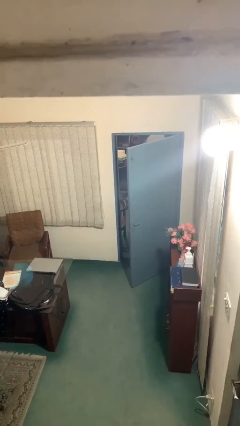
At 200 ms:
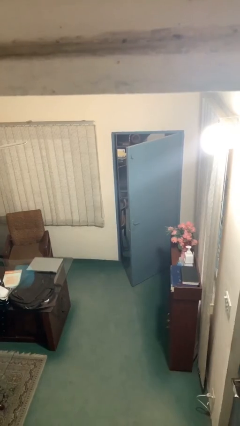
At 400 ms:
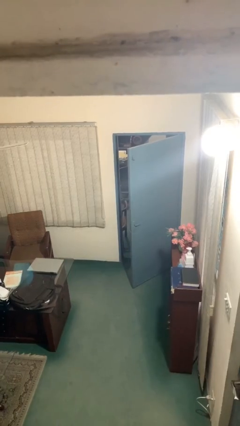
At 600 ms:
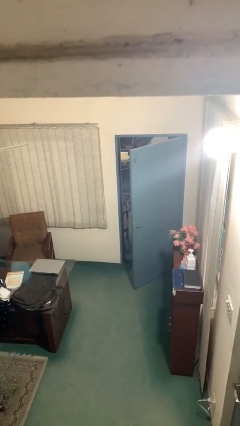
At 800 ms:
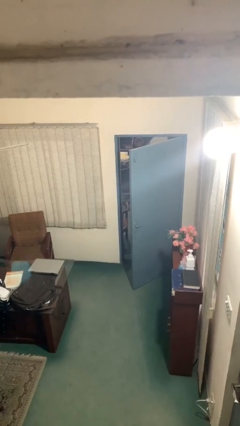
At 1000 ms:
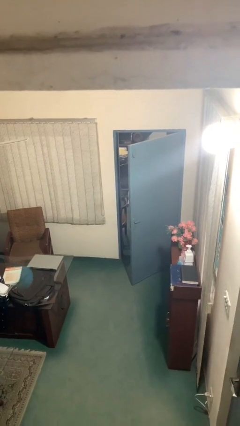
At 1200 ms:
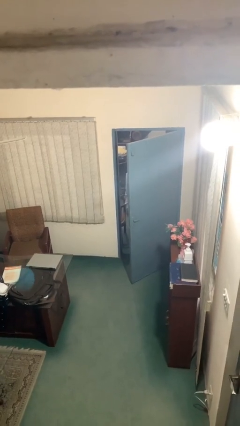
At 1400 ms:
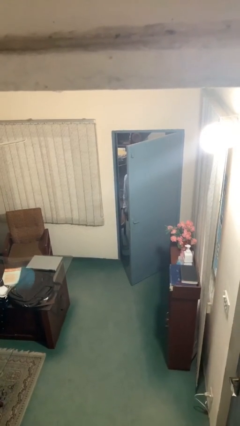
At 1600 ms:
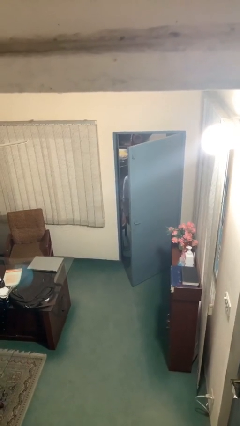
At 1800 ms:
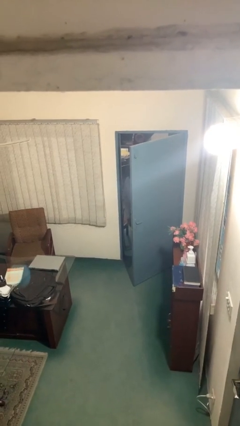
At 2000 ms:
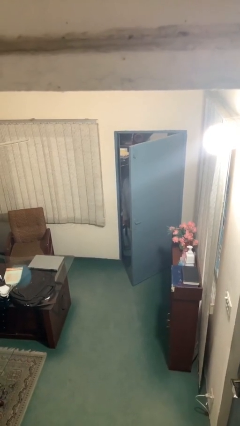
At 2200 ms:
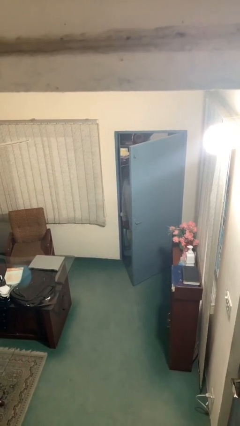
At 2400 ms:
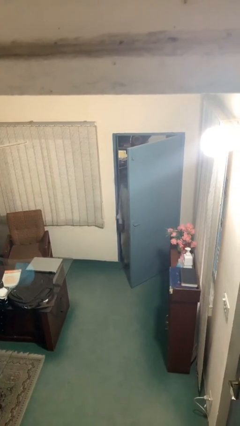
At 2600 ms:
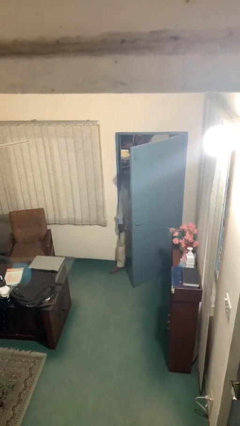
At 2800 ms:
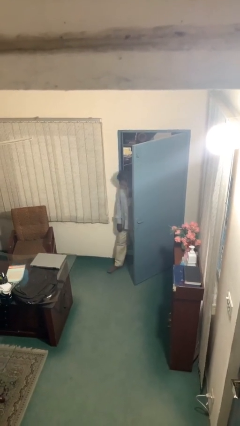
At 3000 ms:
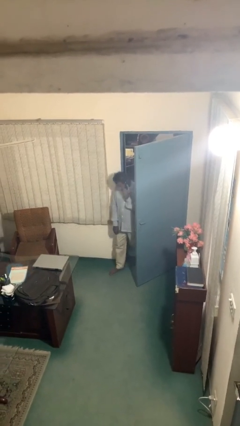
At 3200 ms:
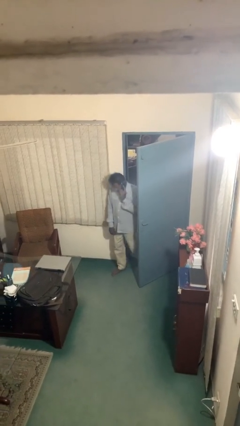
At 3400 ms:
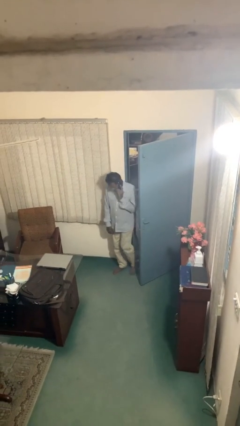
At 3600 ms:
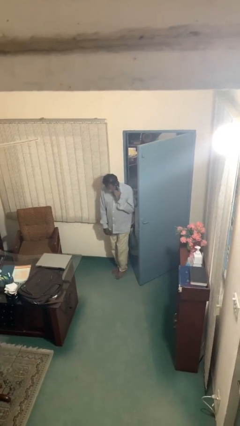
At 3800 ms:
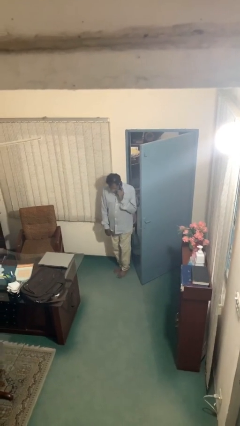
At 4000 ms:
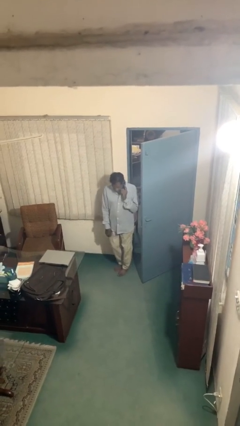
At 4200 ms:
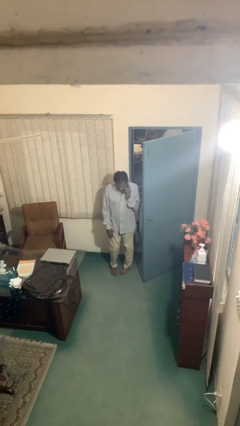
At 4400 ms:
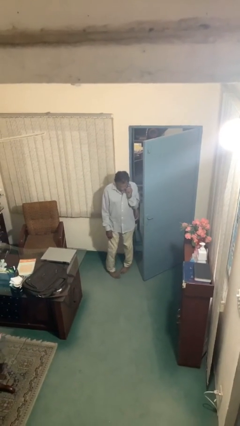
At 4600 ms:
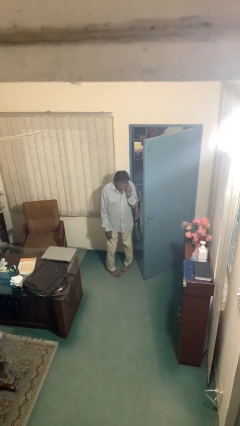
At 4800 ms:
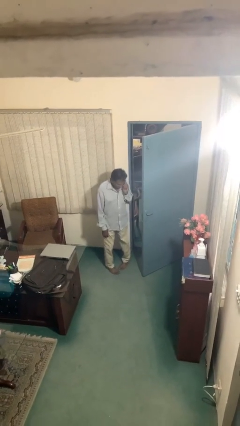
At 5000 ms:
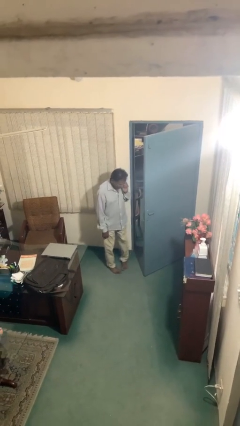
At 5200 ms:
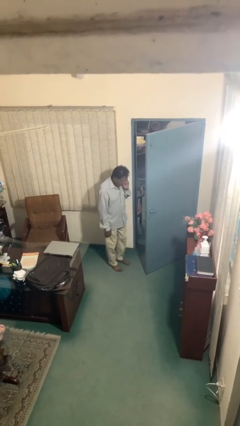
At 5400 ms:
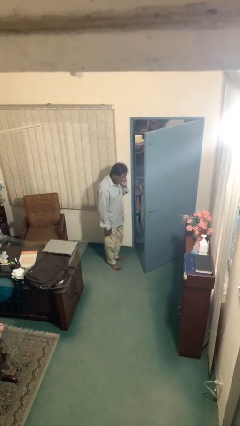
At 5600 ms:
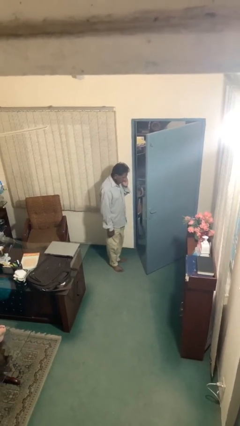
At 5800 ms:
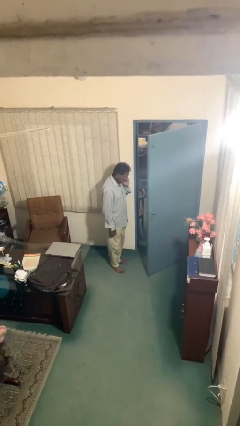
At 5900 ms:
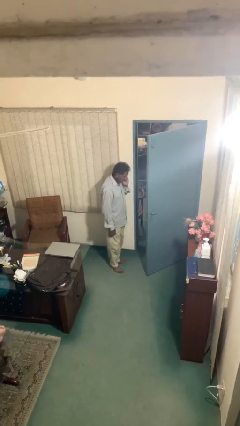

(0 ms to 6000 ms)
person enters scene through structure

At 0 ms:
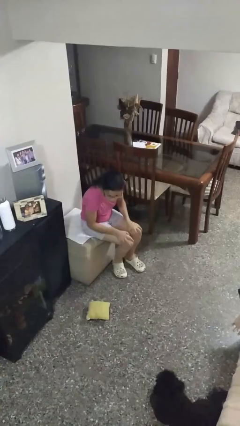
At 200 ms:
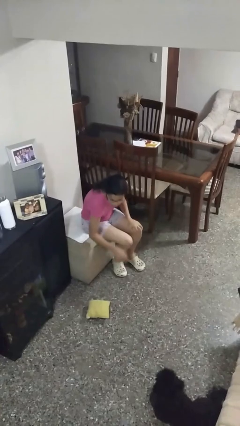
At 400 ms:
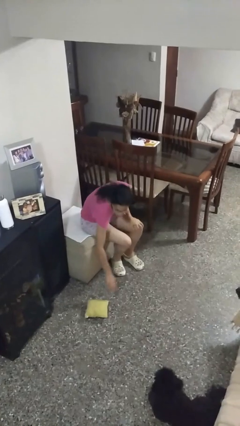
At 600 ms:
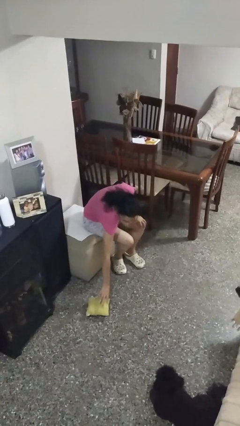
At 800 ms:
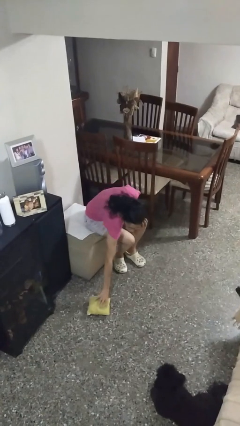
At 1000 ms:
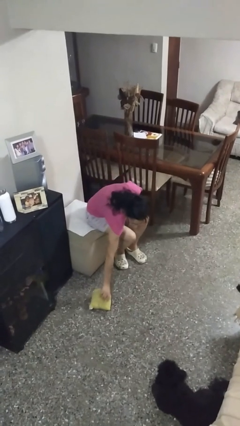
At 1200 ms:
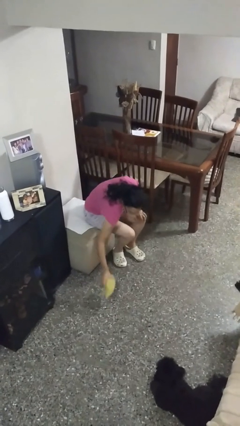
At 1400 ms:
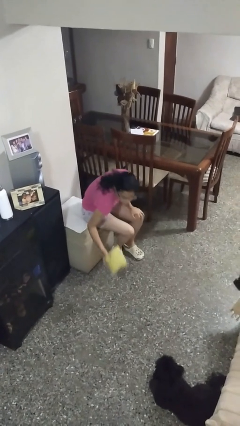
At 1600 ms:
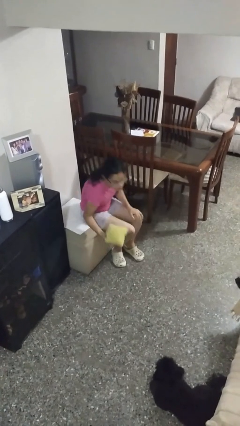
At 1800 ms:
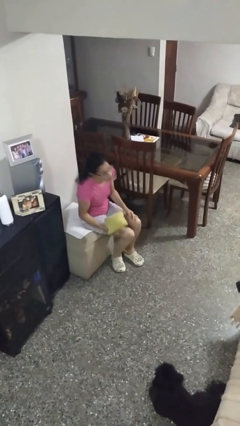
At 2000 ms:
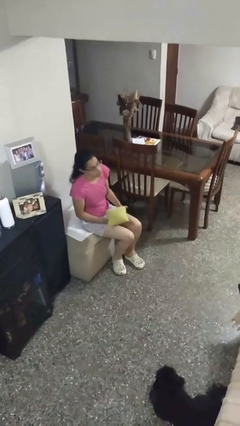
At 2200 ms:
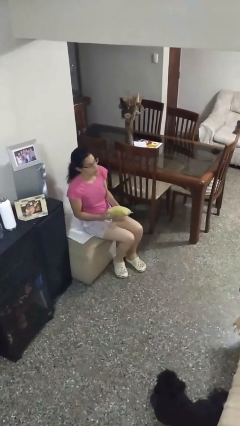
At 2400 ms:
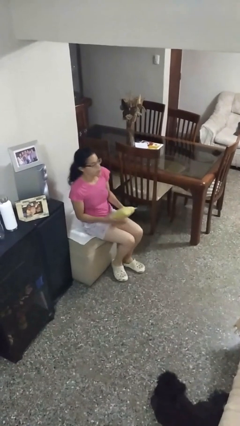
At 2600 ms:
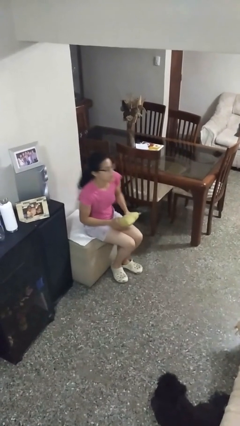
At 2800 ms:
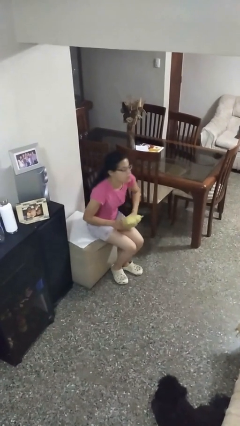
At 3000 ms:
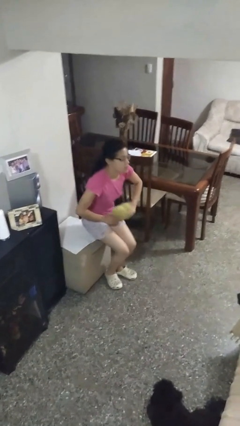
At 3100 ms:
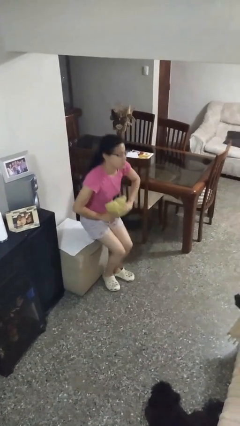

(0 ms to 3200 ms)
person picks up object from floor

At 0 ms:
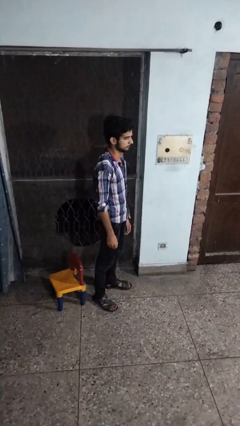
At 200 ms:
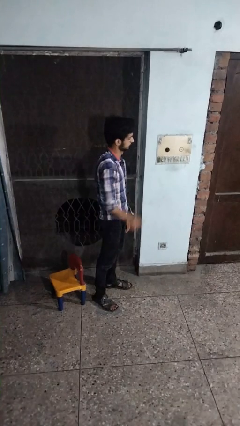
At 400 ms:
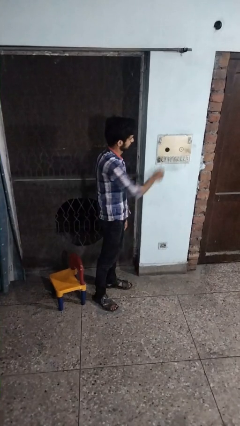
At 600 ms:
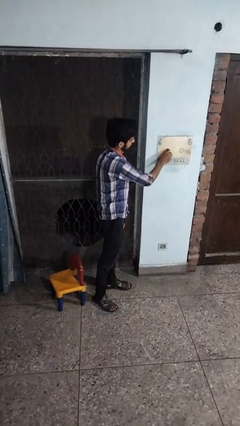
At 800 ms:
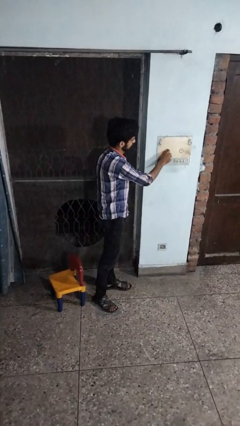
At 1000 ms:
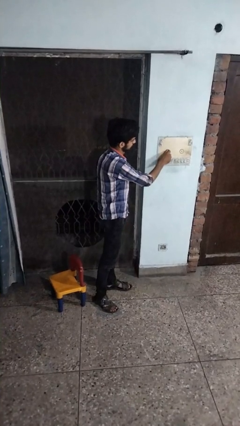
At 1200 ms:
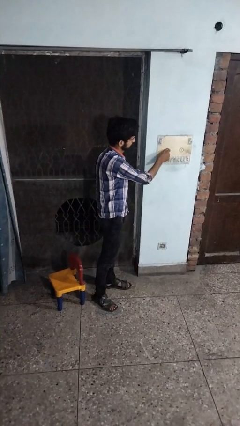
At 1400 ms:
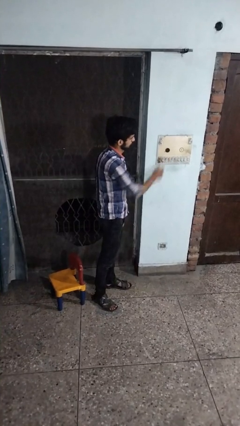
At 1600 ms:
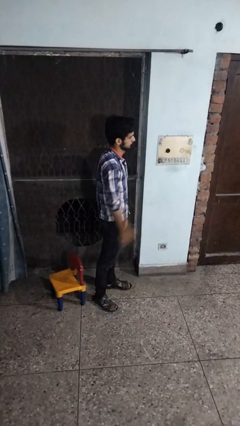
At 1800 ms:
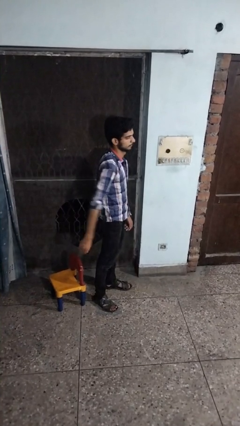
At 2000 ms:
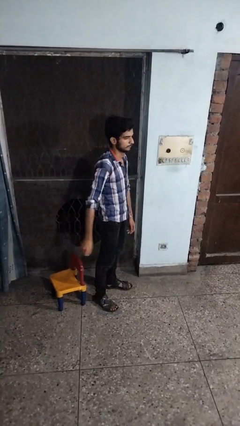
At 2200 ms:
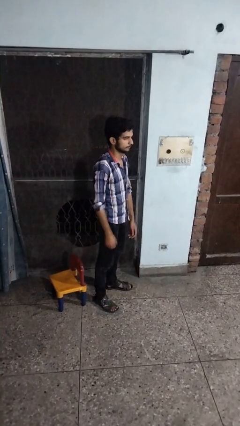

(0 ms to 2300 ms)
person adjusts thermostat

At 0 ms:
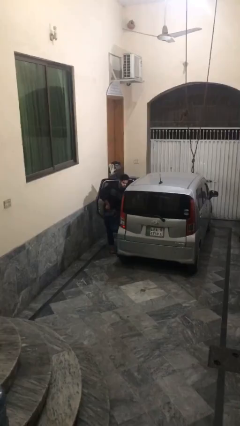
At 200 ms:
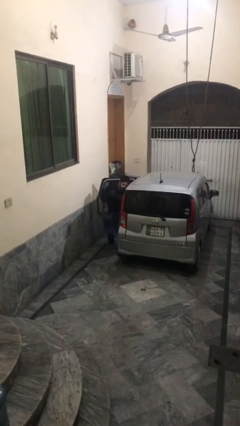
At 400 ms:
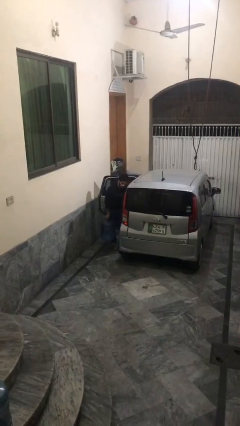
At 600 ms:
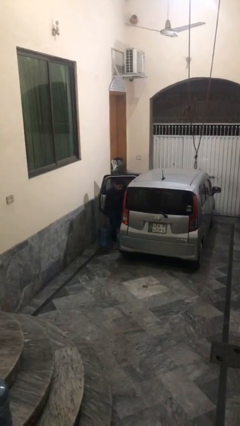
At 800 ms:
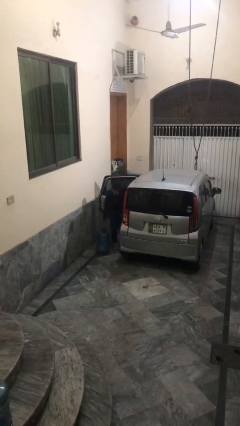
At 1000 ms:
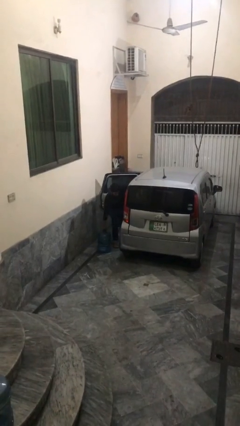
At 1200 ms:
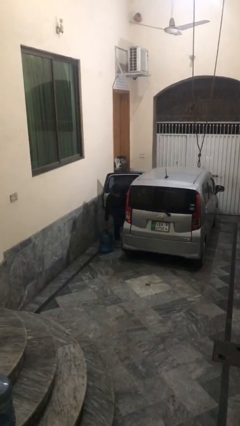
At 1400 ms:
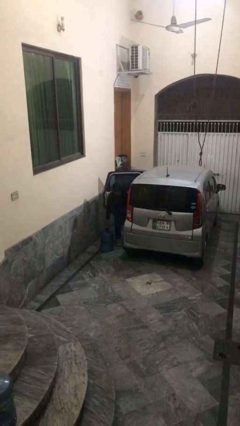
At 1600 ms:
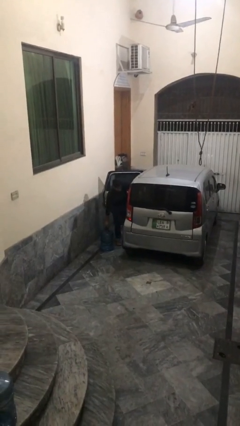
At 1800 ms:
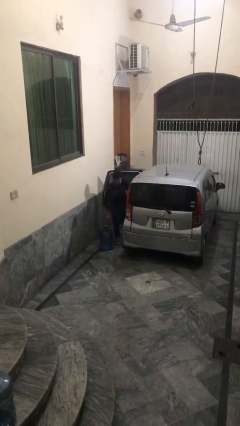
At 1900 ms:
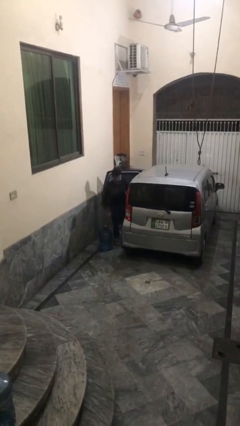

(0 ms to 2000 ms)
person unloads car

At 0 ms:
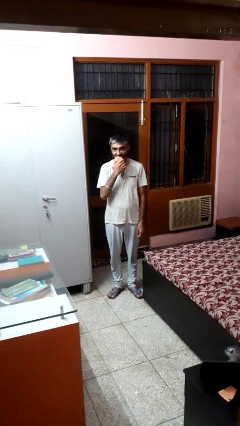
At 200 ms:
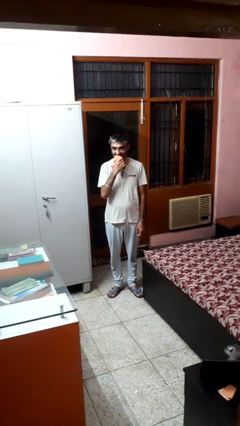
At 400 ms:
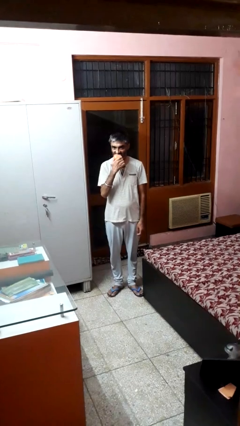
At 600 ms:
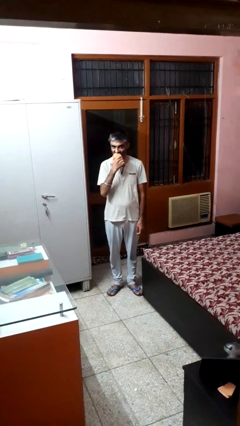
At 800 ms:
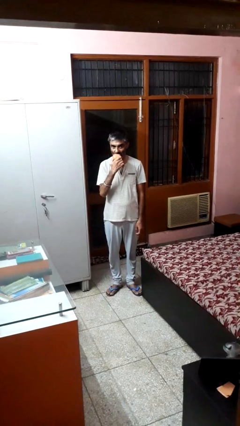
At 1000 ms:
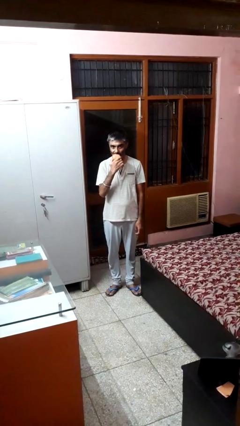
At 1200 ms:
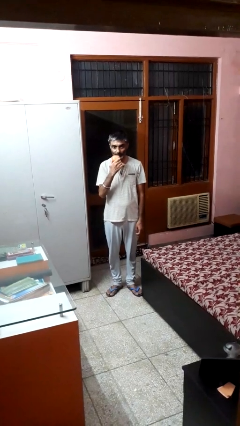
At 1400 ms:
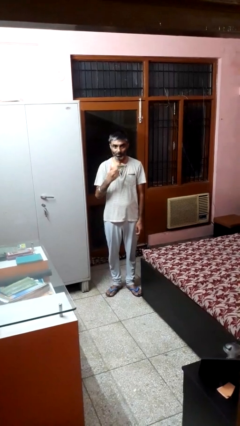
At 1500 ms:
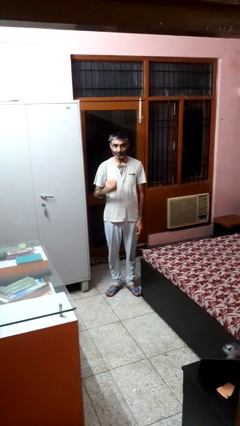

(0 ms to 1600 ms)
person eats apple

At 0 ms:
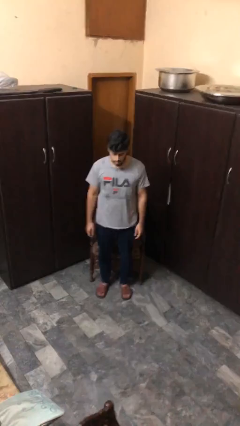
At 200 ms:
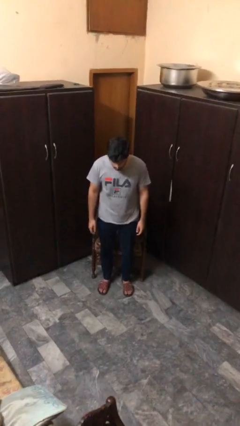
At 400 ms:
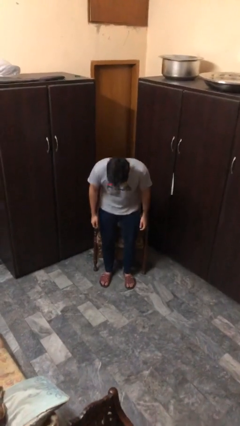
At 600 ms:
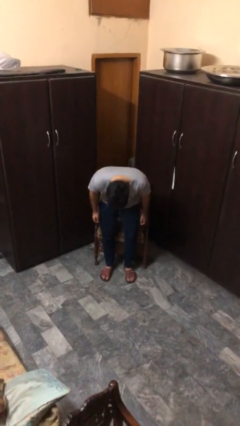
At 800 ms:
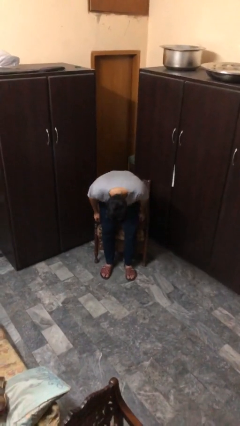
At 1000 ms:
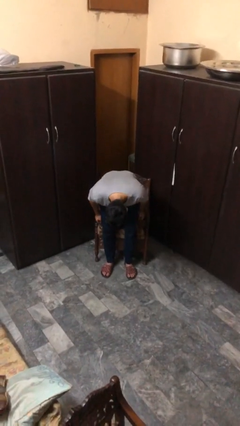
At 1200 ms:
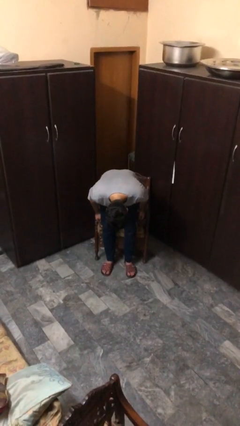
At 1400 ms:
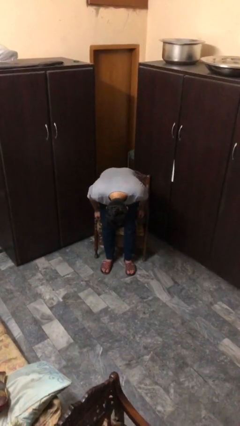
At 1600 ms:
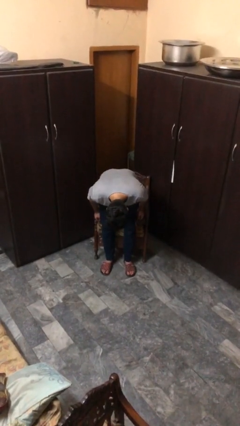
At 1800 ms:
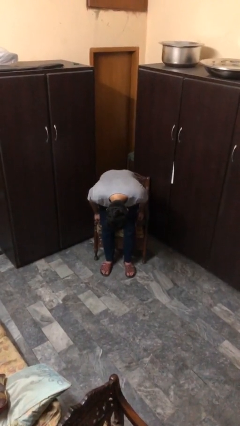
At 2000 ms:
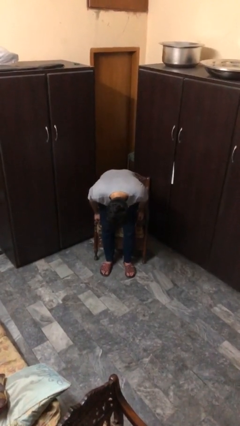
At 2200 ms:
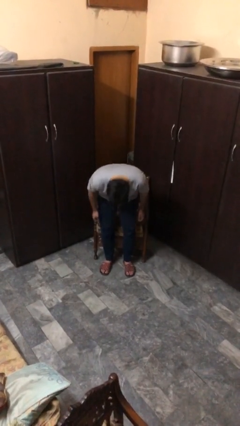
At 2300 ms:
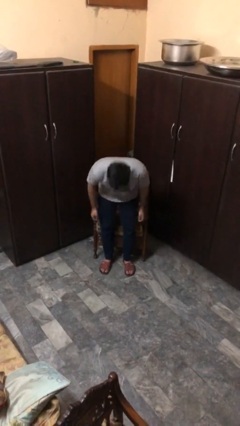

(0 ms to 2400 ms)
person bows

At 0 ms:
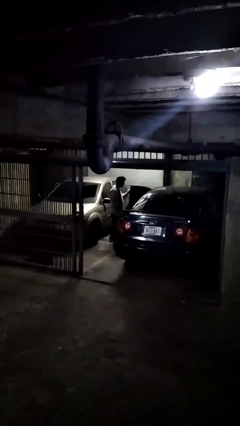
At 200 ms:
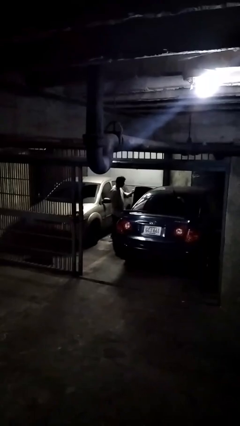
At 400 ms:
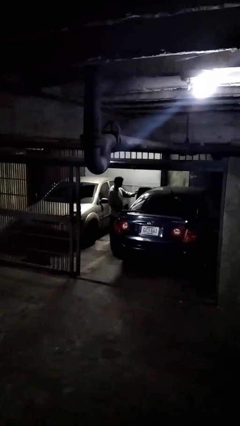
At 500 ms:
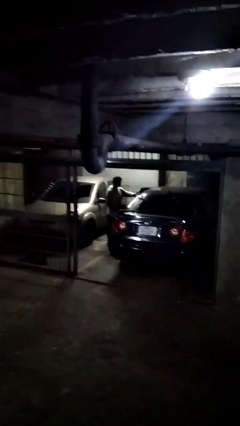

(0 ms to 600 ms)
person closes car door
